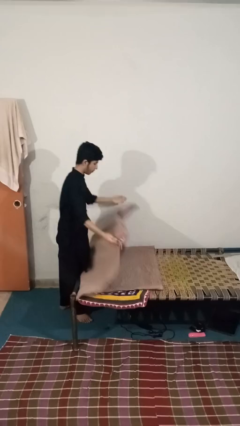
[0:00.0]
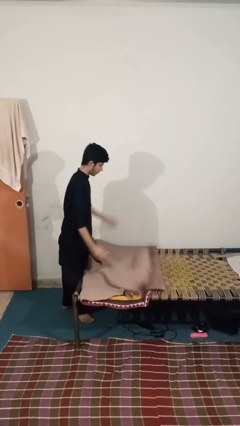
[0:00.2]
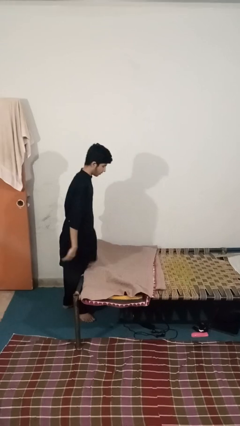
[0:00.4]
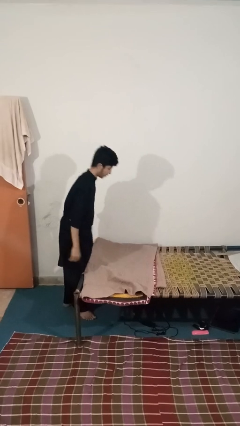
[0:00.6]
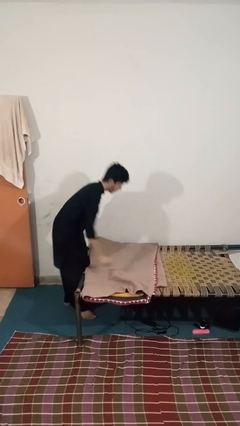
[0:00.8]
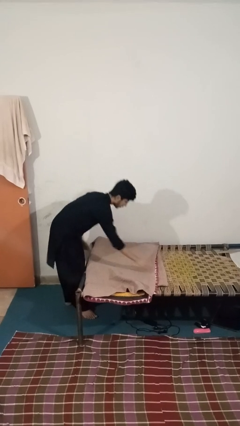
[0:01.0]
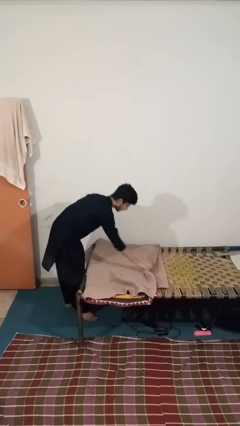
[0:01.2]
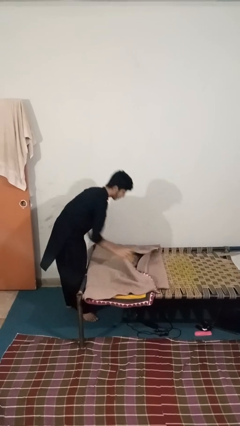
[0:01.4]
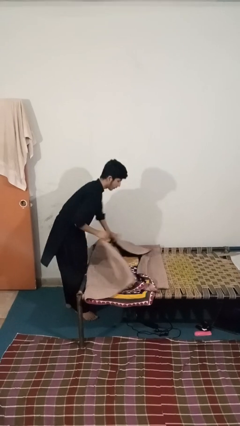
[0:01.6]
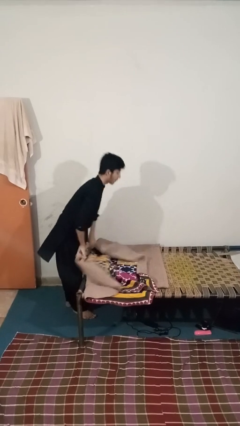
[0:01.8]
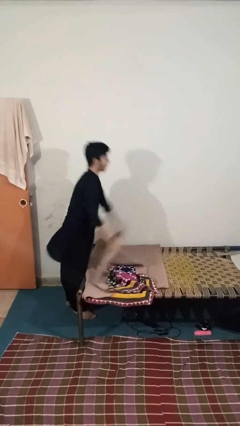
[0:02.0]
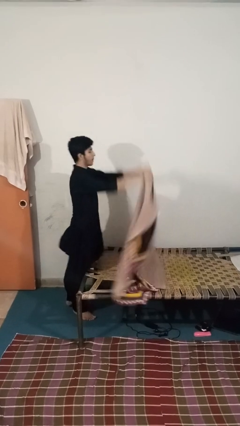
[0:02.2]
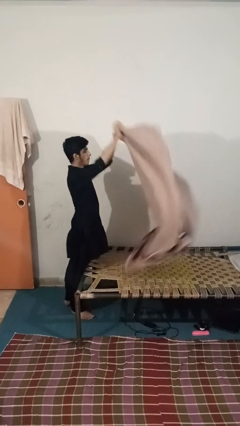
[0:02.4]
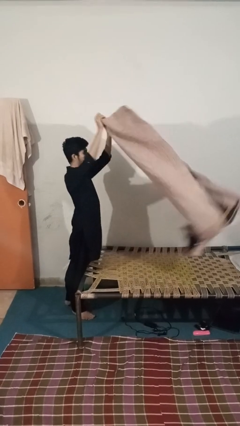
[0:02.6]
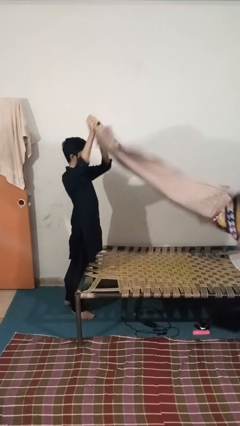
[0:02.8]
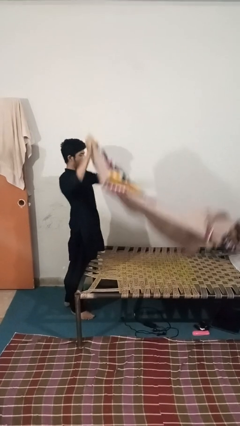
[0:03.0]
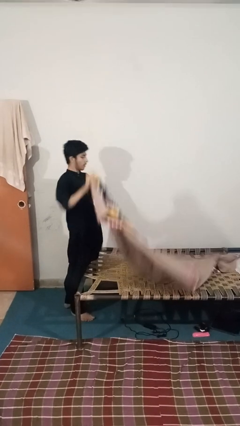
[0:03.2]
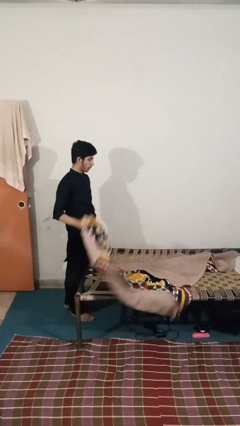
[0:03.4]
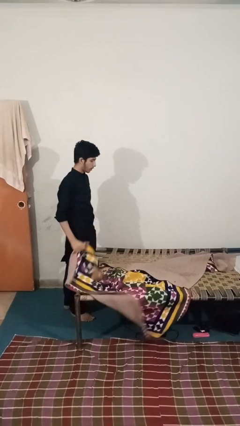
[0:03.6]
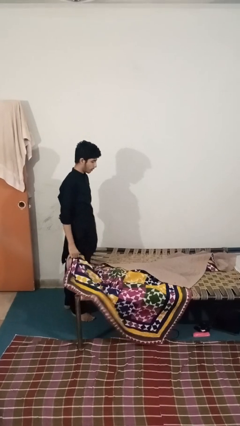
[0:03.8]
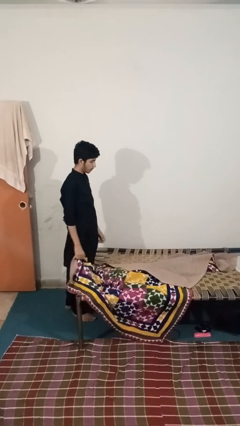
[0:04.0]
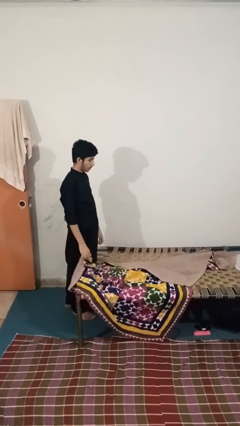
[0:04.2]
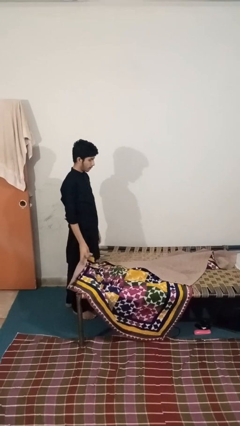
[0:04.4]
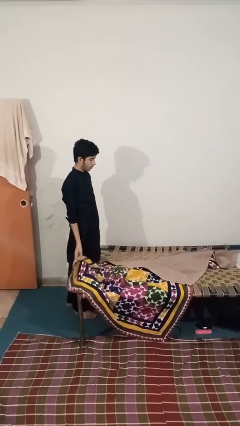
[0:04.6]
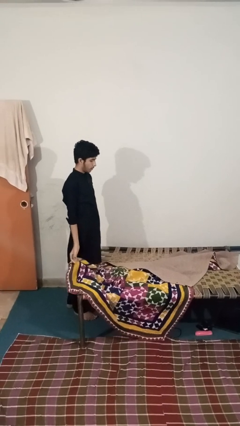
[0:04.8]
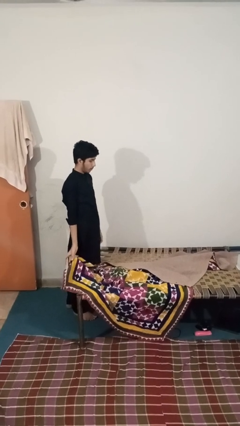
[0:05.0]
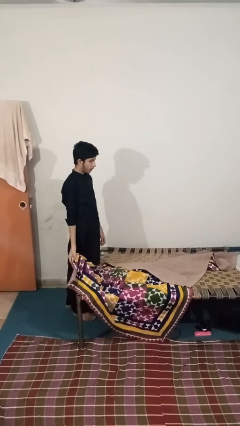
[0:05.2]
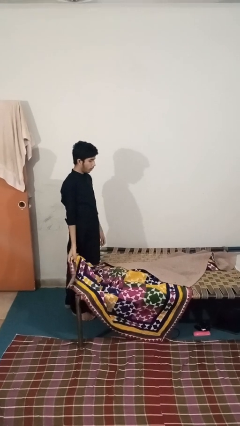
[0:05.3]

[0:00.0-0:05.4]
person unfolds blanket

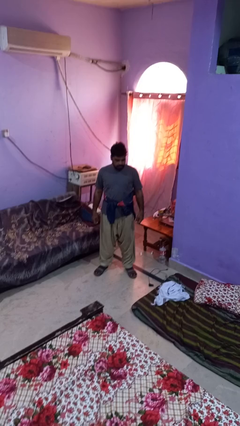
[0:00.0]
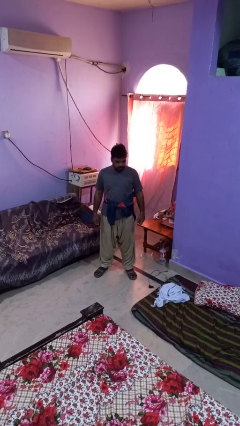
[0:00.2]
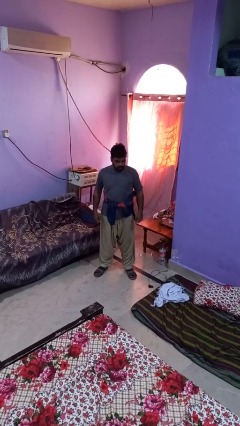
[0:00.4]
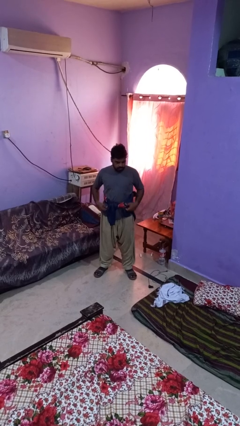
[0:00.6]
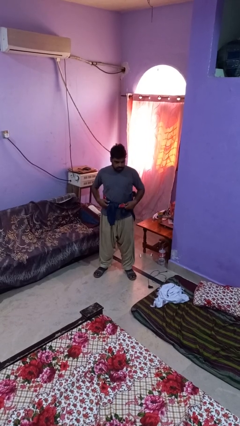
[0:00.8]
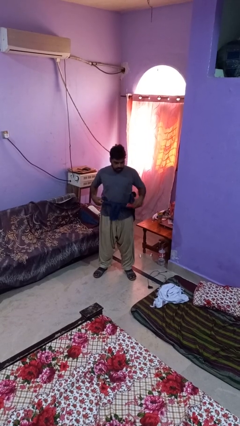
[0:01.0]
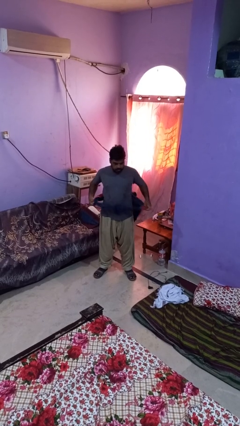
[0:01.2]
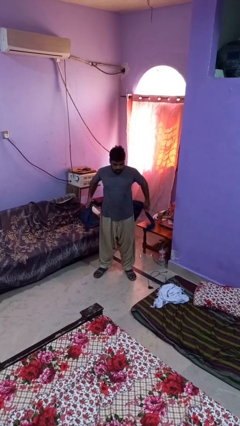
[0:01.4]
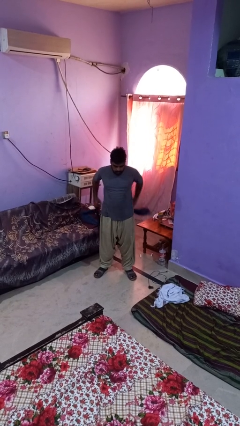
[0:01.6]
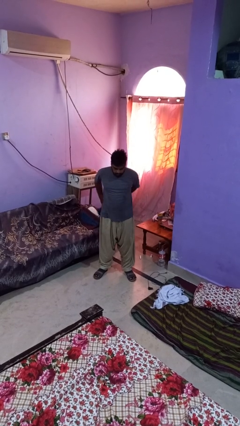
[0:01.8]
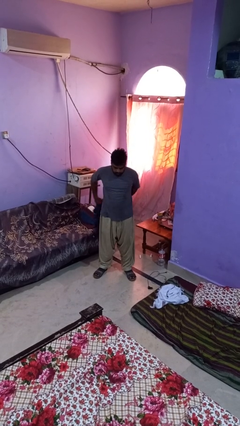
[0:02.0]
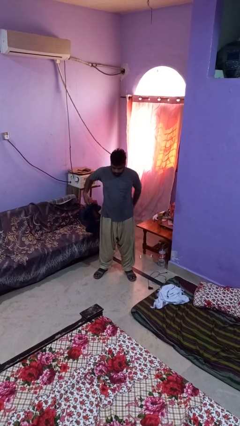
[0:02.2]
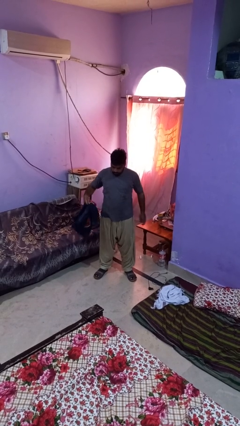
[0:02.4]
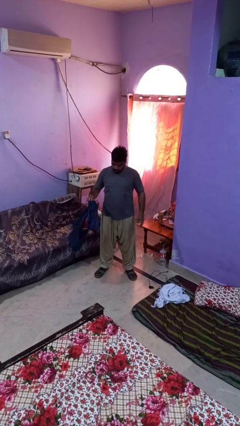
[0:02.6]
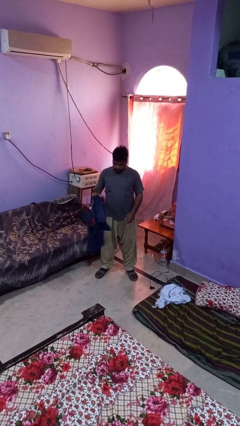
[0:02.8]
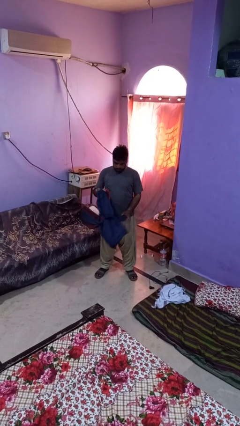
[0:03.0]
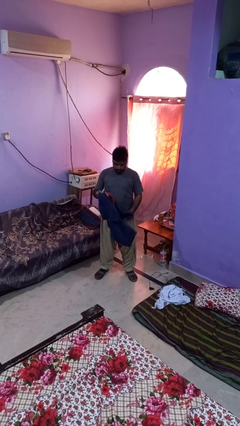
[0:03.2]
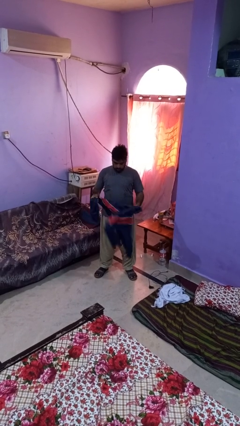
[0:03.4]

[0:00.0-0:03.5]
person unties jacket around waist

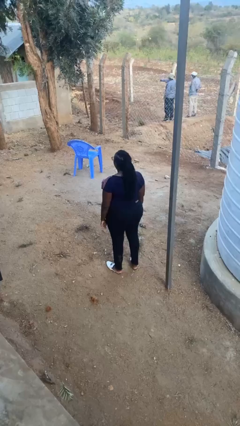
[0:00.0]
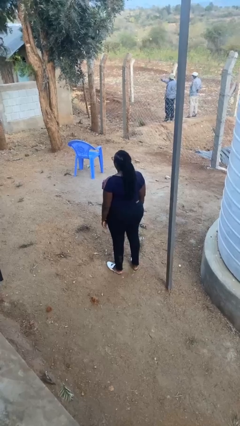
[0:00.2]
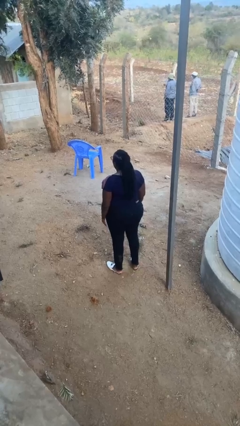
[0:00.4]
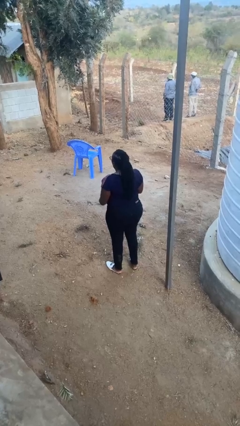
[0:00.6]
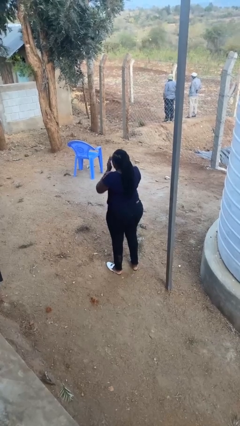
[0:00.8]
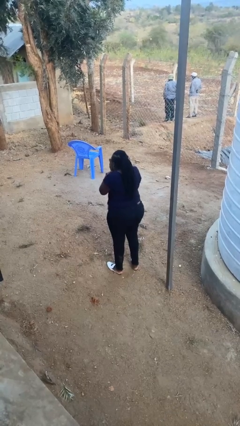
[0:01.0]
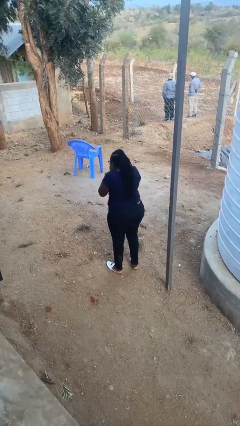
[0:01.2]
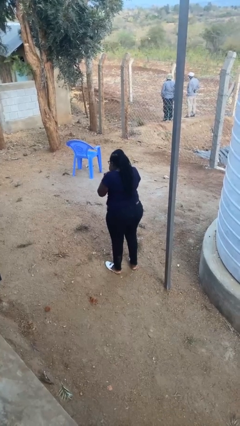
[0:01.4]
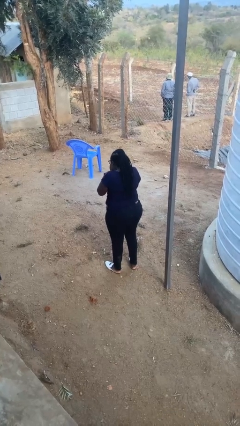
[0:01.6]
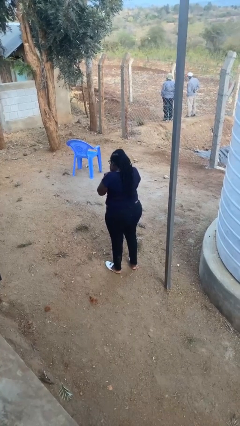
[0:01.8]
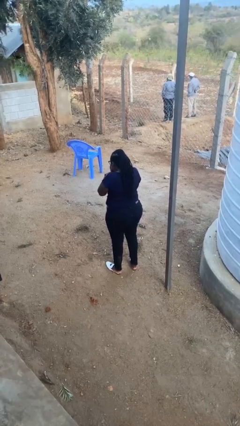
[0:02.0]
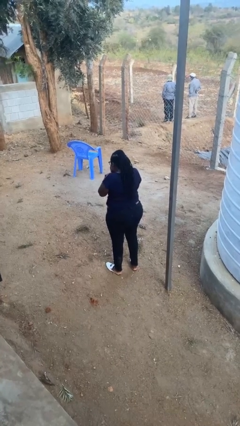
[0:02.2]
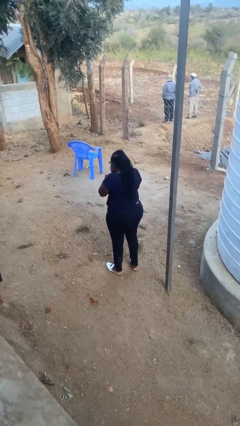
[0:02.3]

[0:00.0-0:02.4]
person sneezes into hand

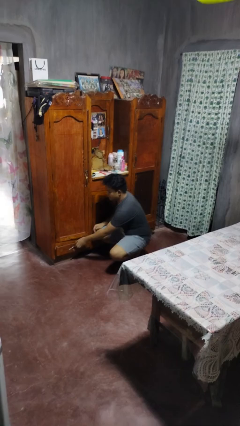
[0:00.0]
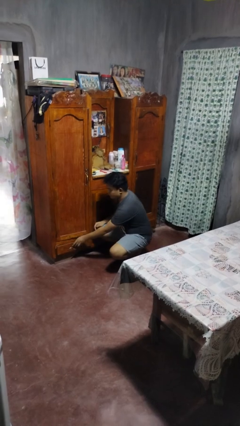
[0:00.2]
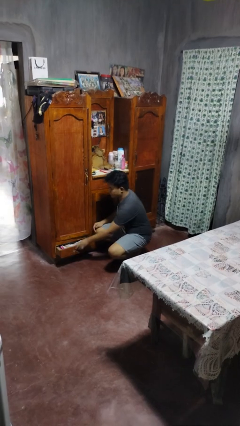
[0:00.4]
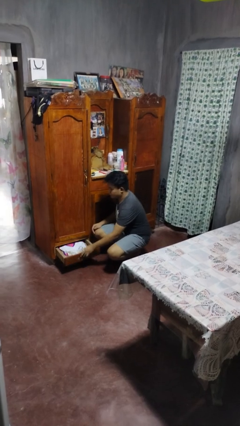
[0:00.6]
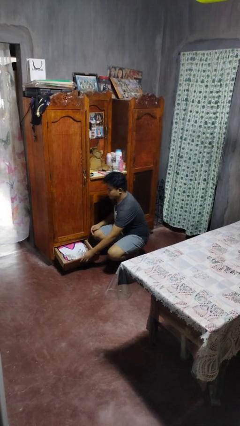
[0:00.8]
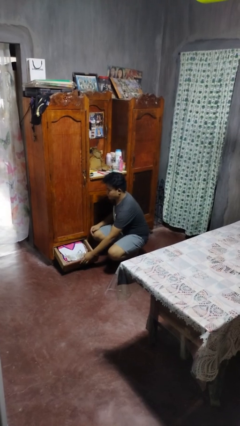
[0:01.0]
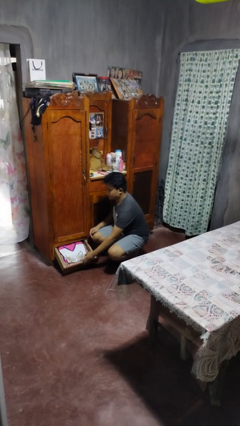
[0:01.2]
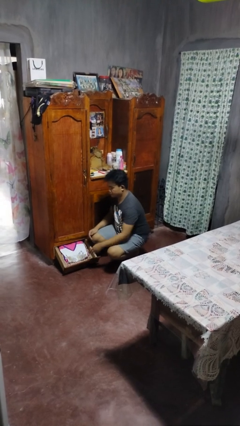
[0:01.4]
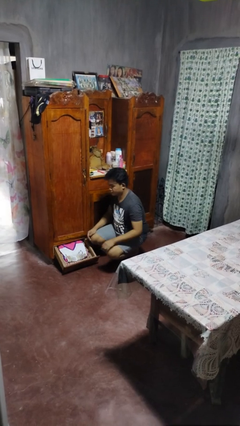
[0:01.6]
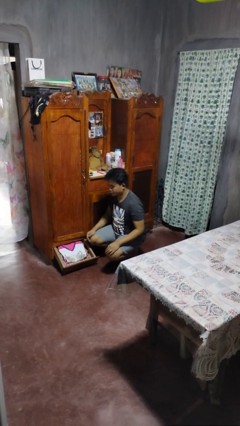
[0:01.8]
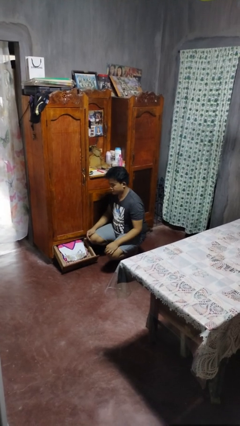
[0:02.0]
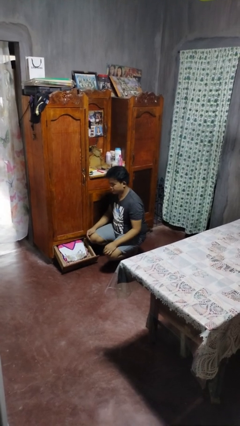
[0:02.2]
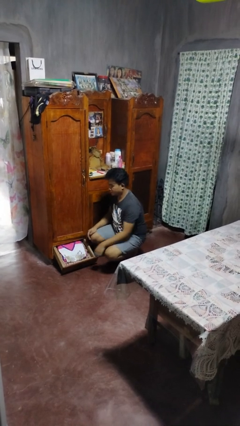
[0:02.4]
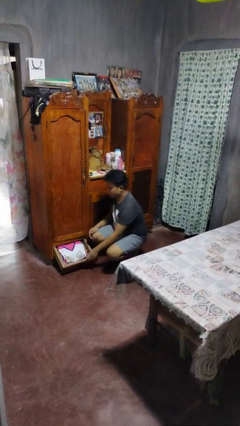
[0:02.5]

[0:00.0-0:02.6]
person opens dresser drawer

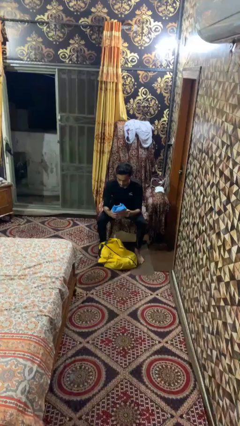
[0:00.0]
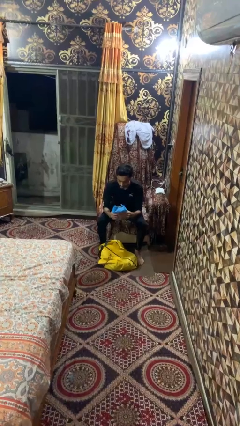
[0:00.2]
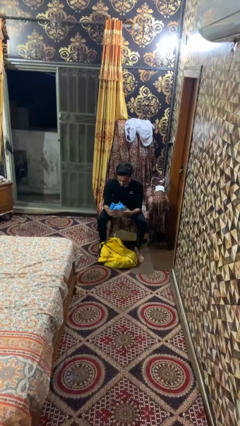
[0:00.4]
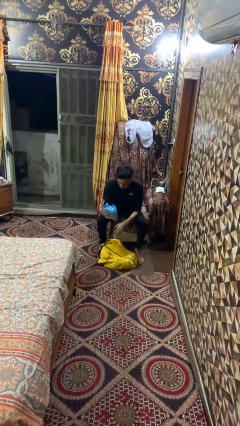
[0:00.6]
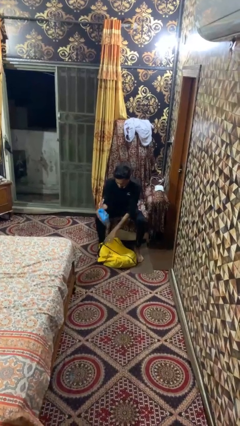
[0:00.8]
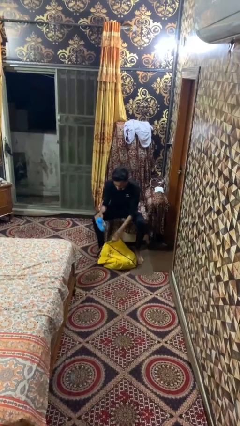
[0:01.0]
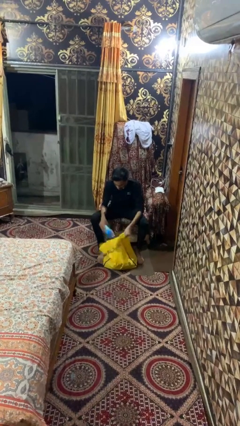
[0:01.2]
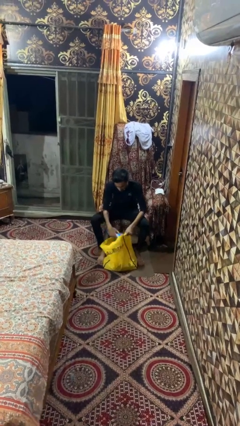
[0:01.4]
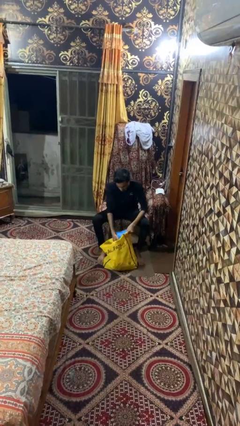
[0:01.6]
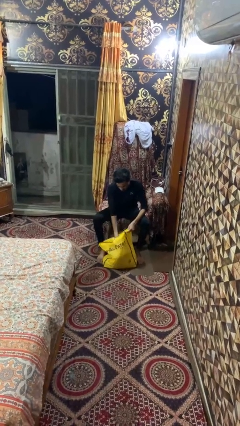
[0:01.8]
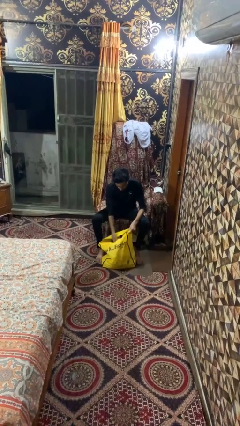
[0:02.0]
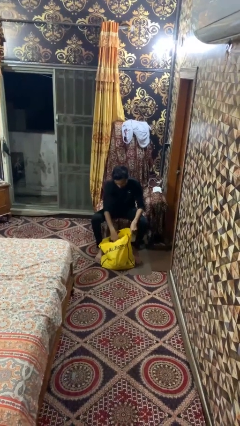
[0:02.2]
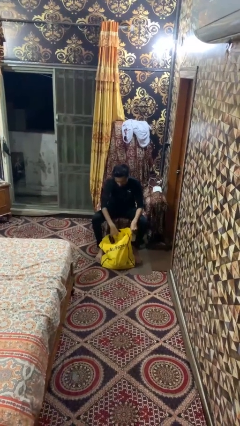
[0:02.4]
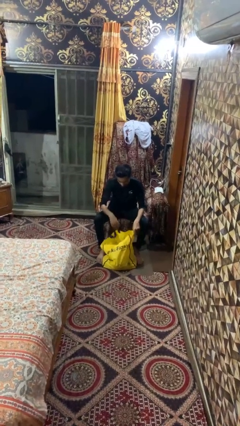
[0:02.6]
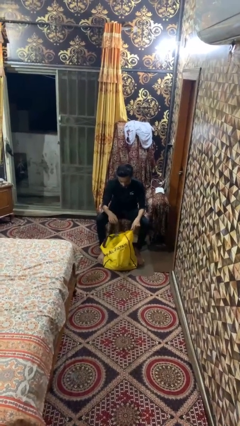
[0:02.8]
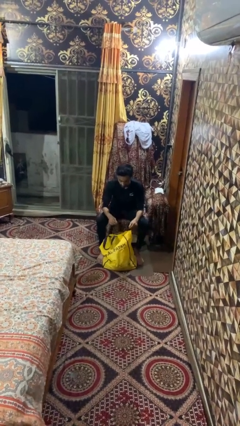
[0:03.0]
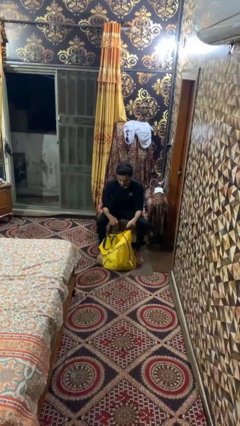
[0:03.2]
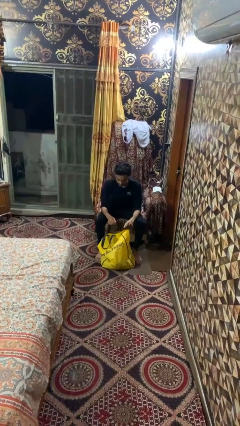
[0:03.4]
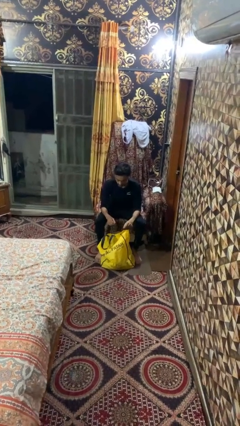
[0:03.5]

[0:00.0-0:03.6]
person puts object into bag

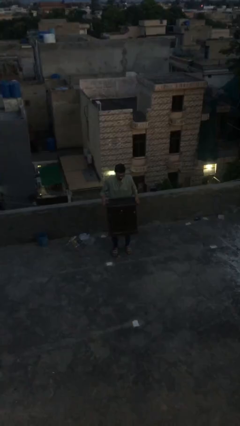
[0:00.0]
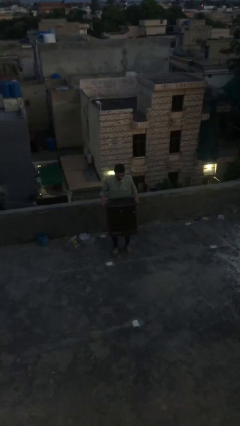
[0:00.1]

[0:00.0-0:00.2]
person carries heavy object
